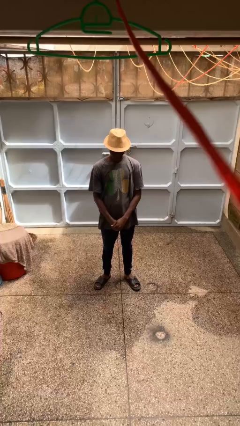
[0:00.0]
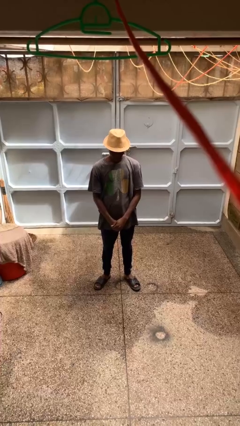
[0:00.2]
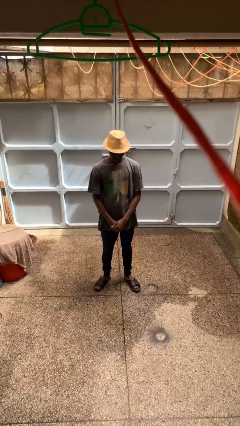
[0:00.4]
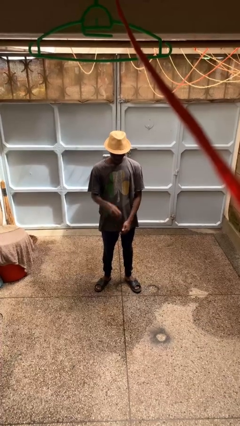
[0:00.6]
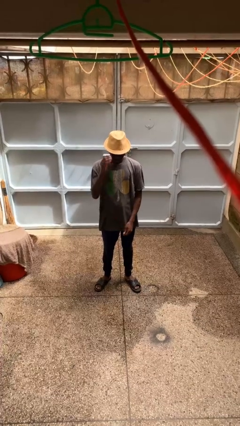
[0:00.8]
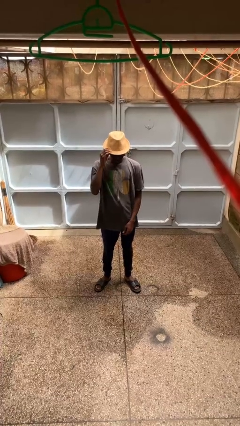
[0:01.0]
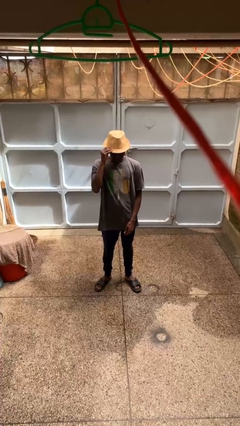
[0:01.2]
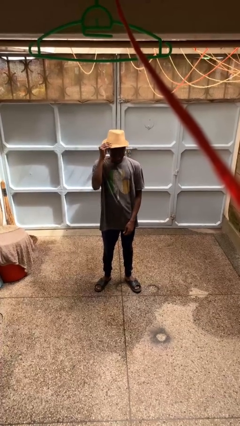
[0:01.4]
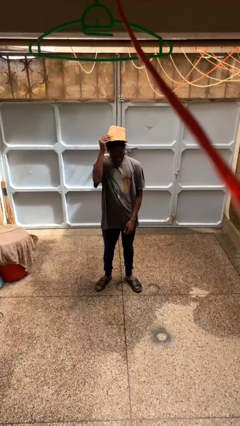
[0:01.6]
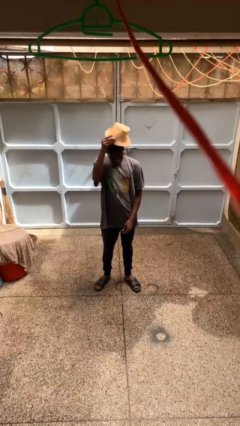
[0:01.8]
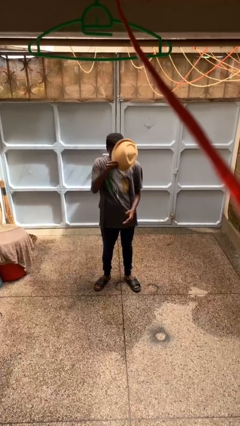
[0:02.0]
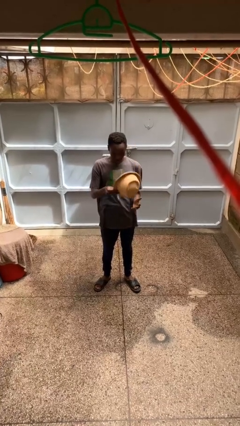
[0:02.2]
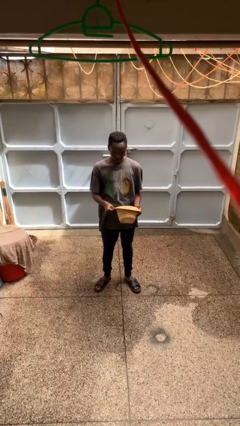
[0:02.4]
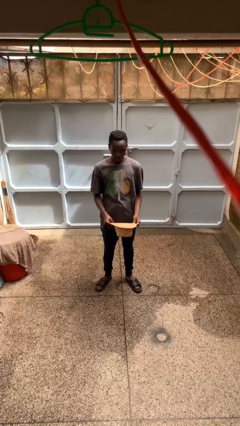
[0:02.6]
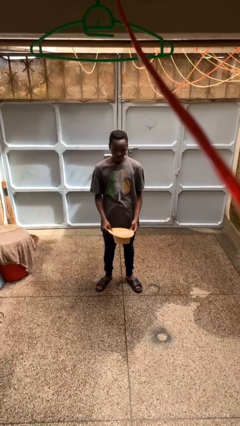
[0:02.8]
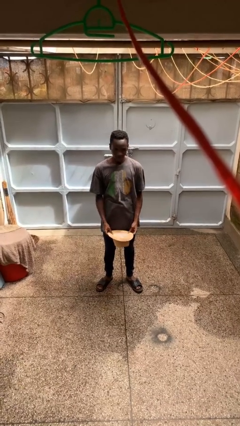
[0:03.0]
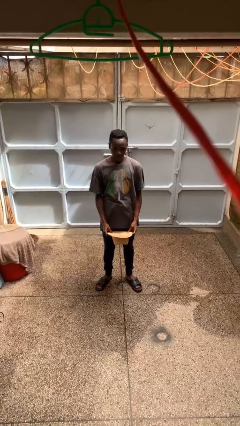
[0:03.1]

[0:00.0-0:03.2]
person takes off hat

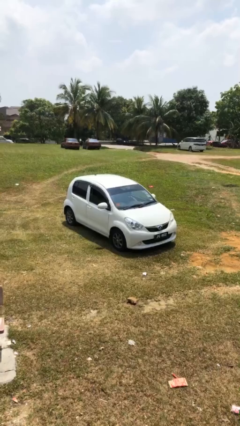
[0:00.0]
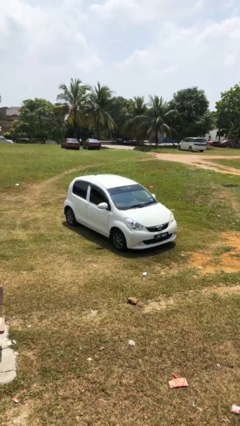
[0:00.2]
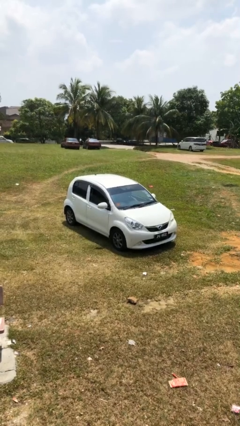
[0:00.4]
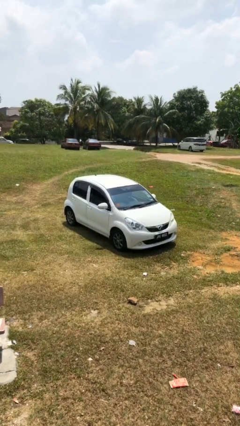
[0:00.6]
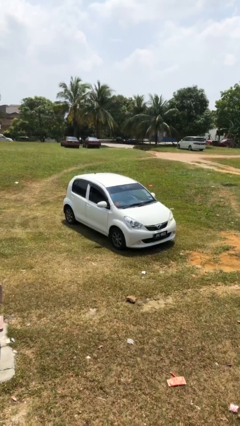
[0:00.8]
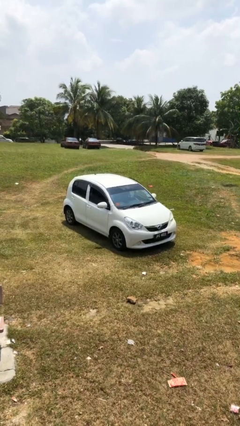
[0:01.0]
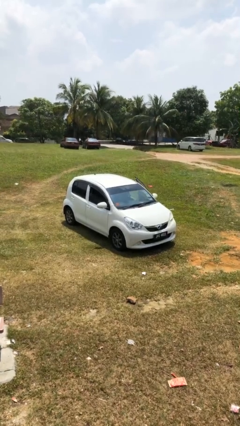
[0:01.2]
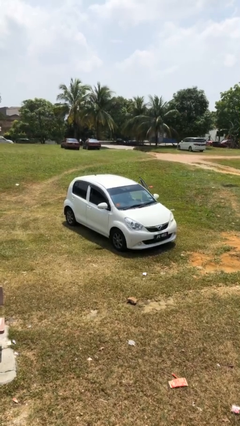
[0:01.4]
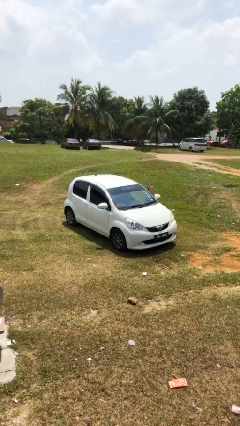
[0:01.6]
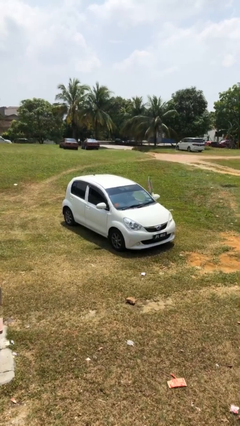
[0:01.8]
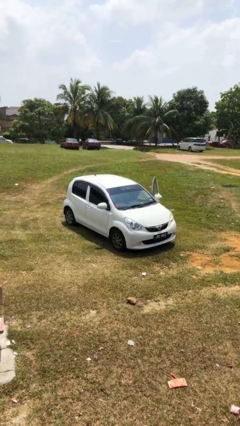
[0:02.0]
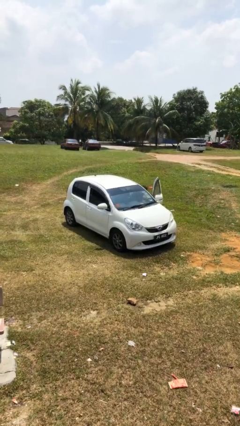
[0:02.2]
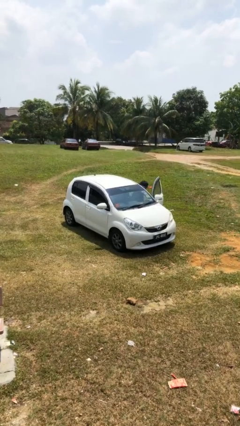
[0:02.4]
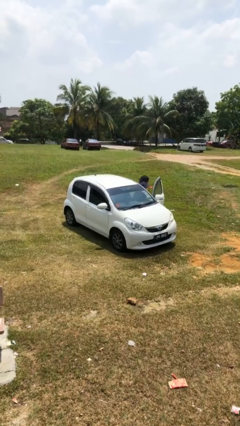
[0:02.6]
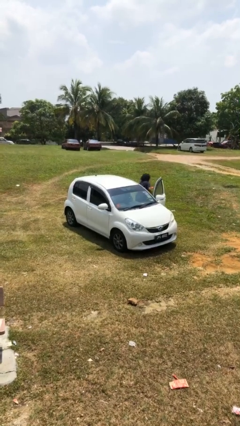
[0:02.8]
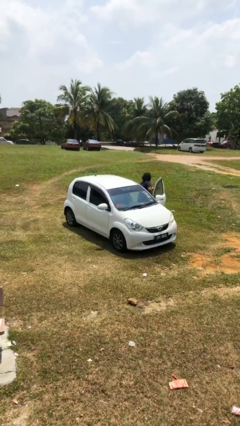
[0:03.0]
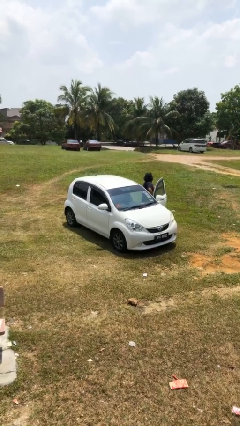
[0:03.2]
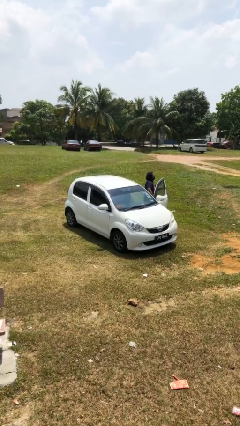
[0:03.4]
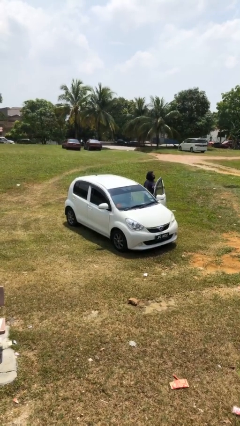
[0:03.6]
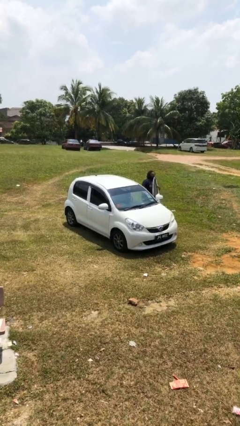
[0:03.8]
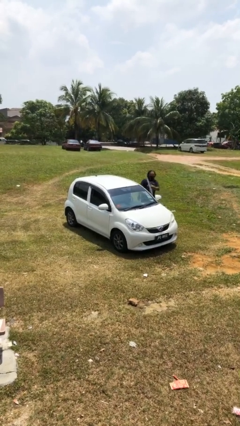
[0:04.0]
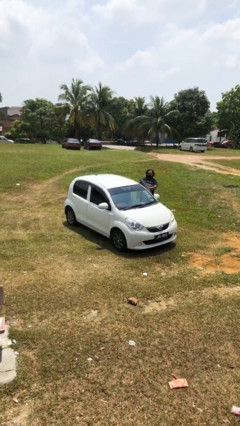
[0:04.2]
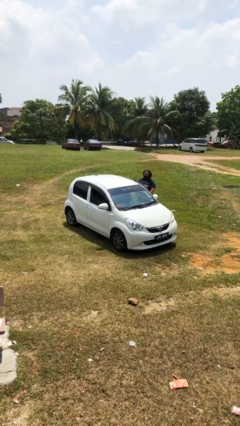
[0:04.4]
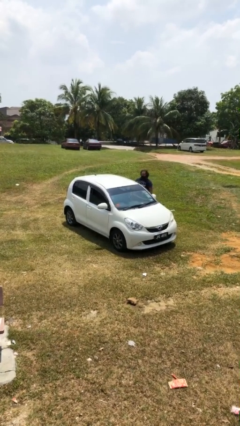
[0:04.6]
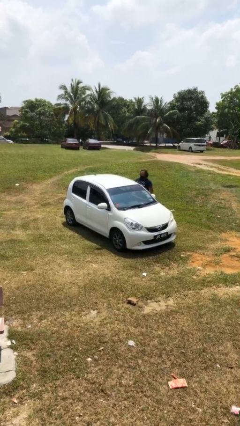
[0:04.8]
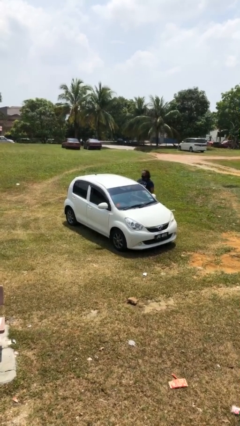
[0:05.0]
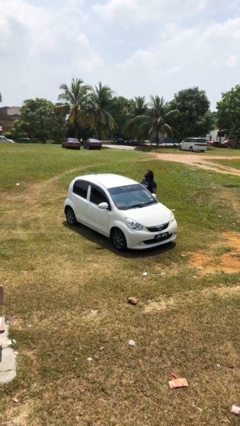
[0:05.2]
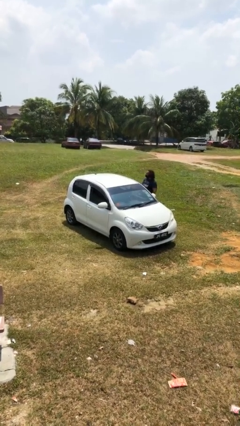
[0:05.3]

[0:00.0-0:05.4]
car drops off person

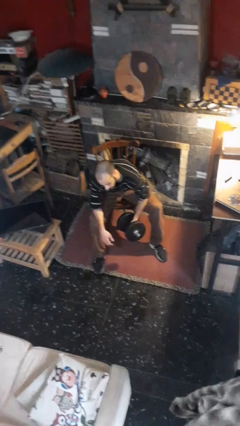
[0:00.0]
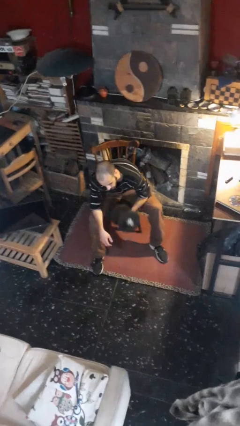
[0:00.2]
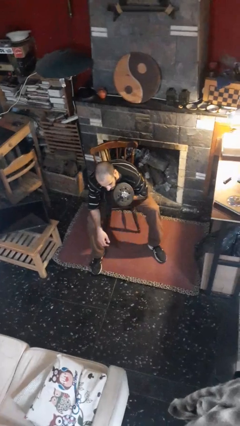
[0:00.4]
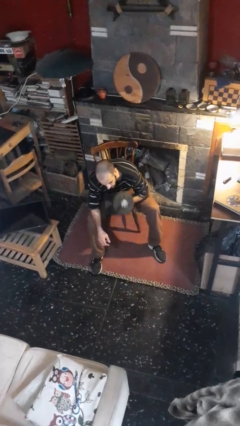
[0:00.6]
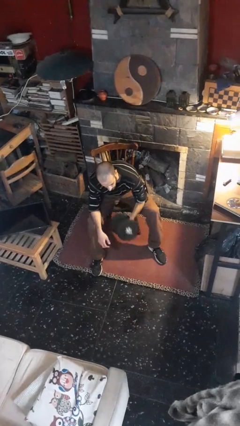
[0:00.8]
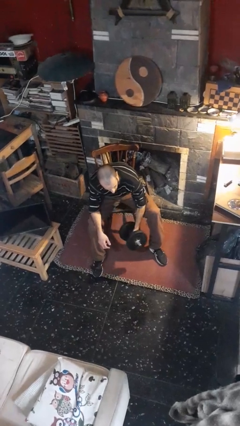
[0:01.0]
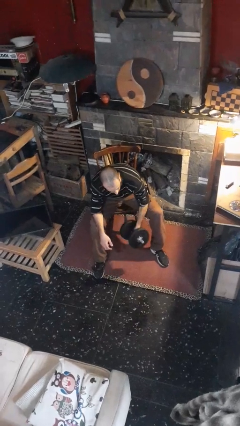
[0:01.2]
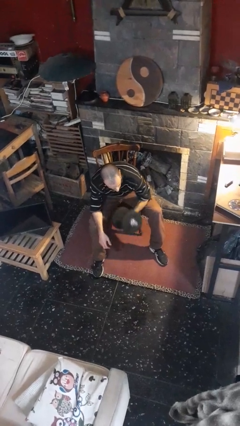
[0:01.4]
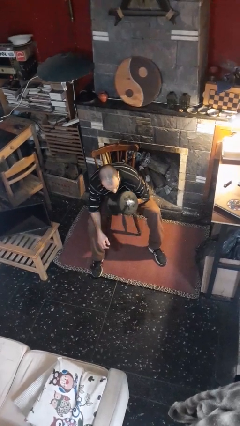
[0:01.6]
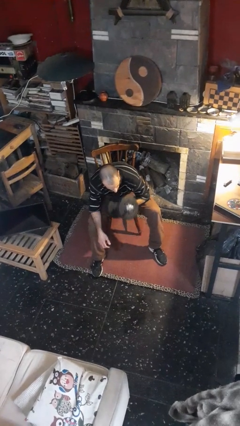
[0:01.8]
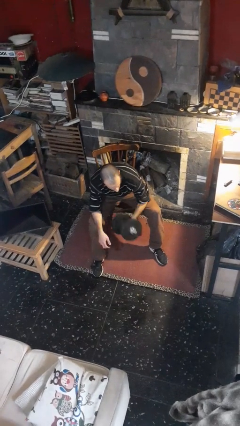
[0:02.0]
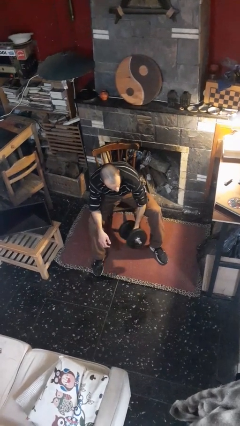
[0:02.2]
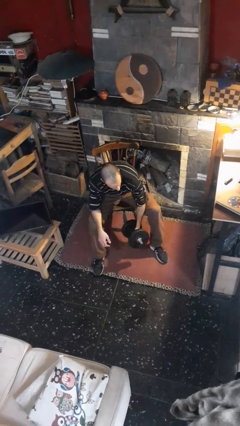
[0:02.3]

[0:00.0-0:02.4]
person lifts dumbbells

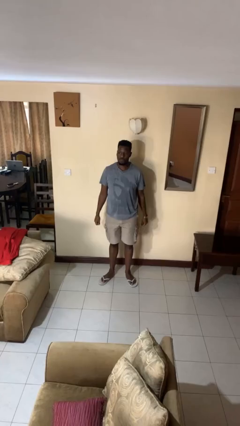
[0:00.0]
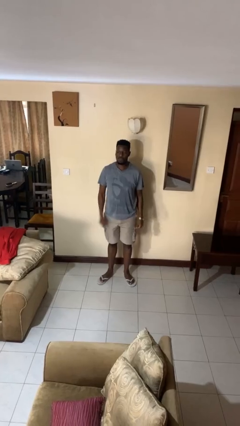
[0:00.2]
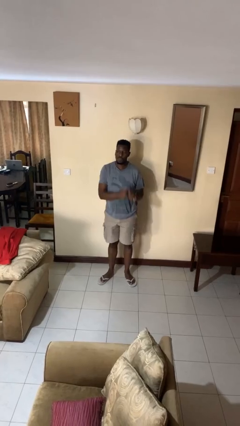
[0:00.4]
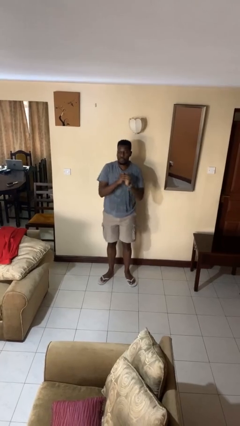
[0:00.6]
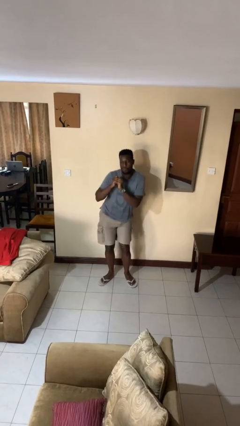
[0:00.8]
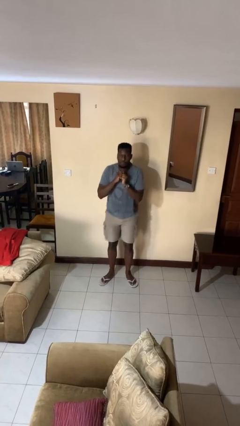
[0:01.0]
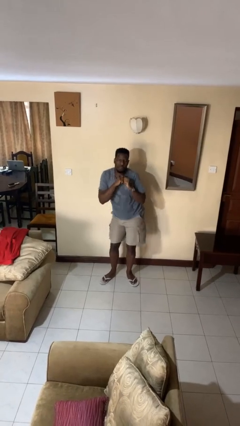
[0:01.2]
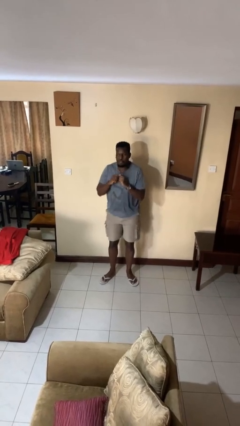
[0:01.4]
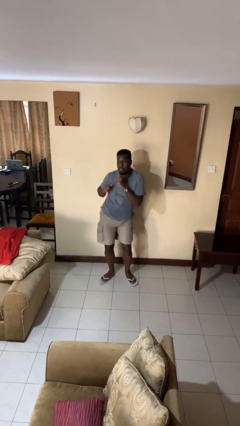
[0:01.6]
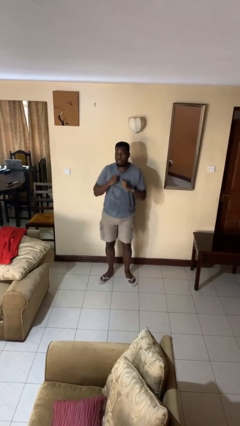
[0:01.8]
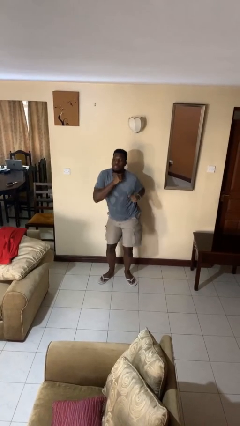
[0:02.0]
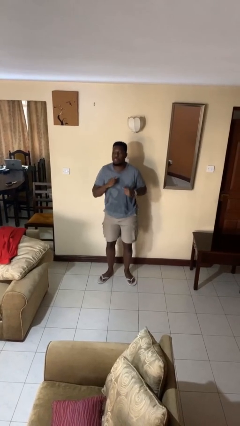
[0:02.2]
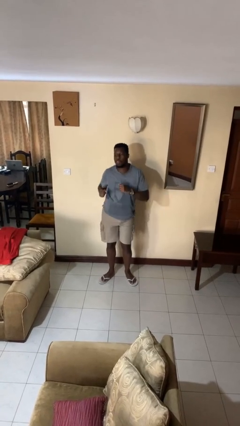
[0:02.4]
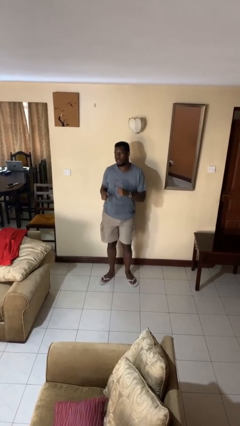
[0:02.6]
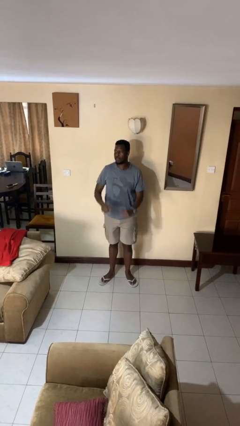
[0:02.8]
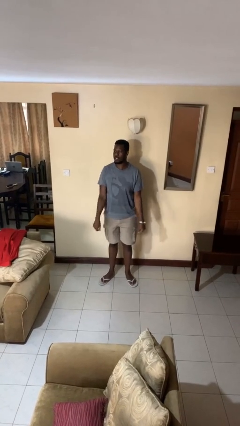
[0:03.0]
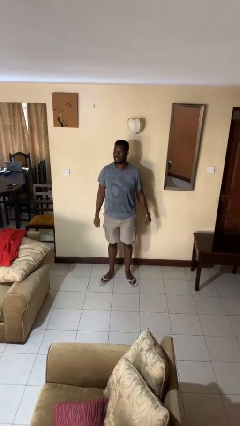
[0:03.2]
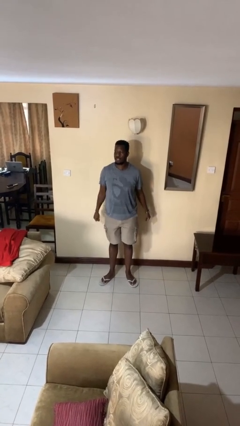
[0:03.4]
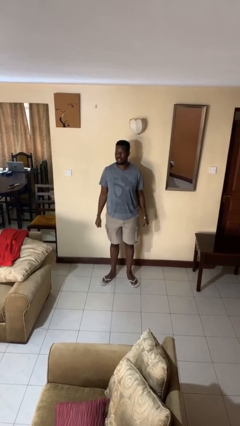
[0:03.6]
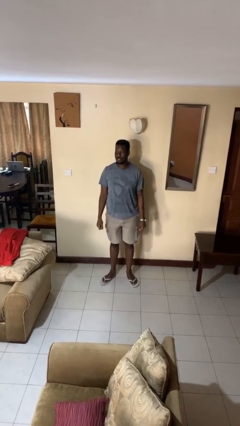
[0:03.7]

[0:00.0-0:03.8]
person wiggles hips

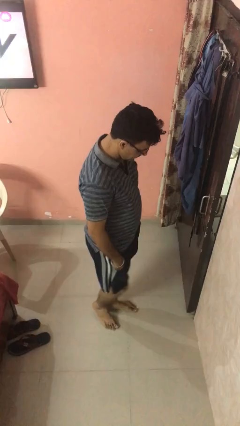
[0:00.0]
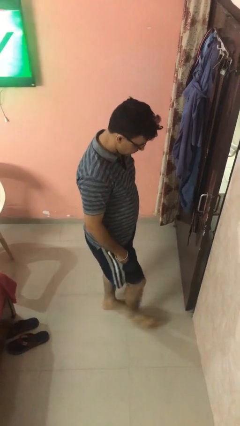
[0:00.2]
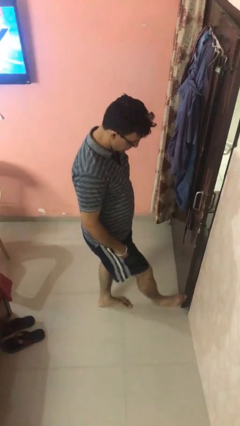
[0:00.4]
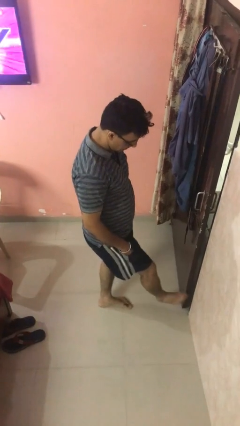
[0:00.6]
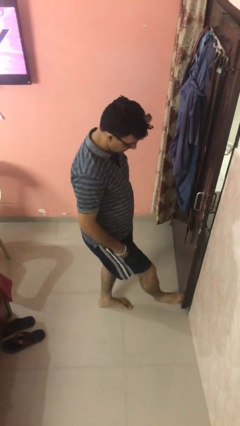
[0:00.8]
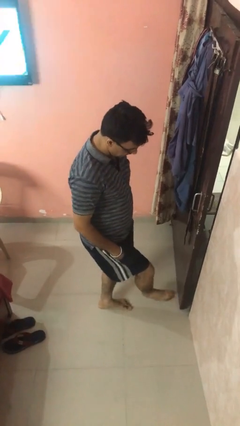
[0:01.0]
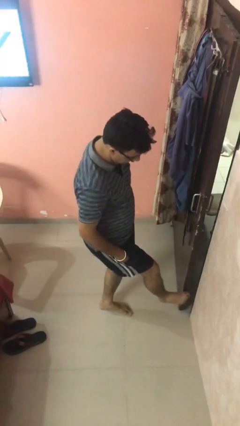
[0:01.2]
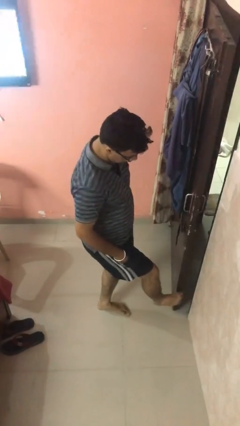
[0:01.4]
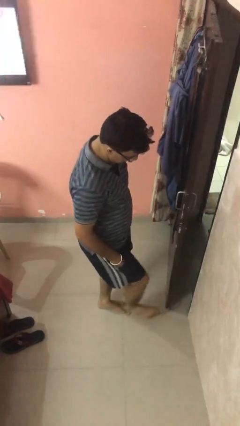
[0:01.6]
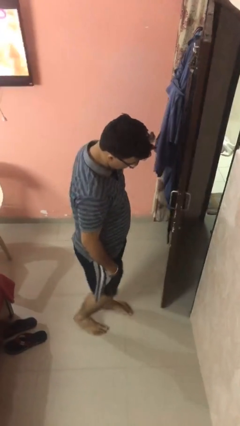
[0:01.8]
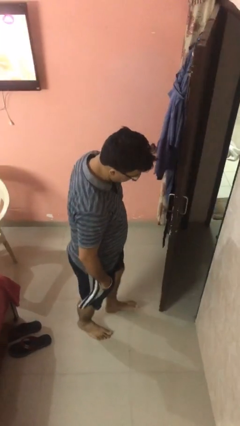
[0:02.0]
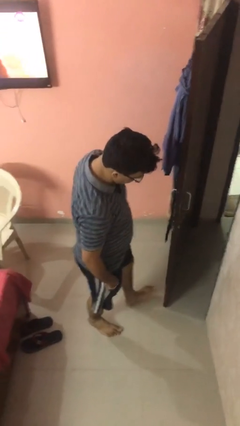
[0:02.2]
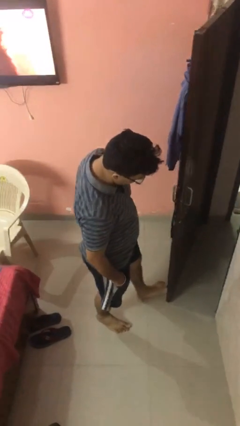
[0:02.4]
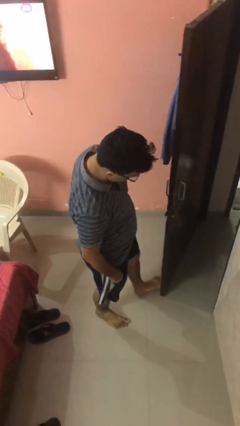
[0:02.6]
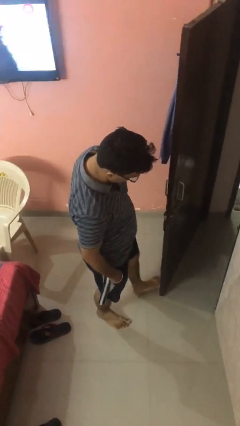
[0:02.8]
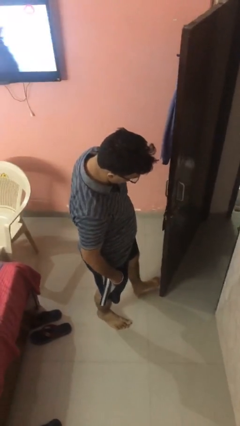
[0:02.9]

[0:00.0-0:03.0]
person opens facility door
